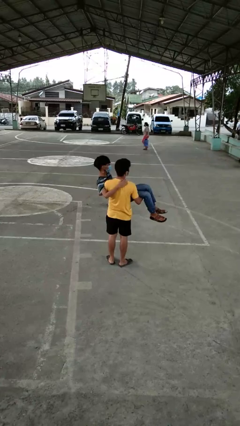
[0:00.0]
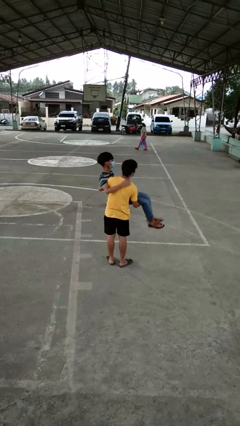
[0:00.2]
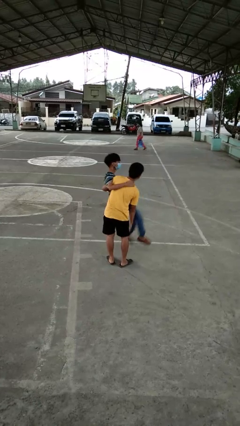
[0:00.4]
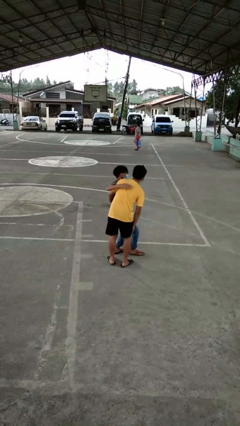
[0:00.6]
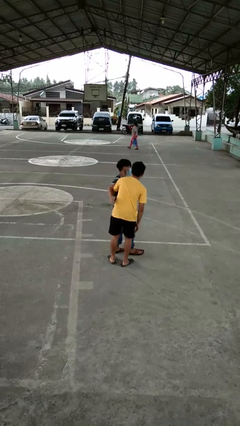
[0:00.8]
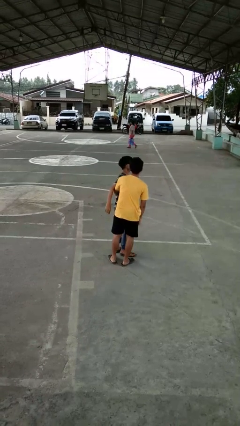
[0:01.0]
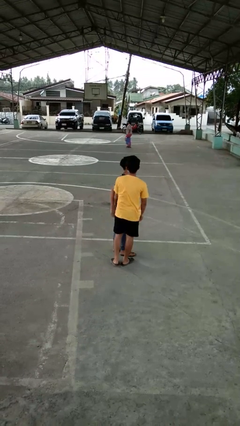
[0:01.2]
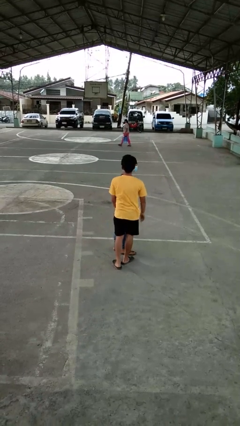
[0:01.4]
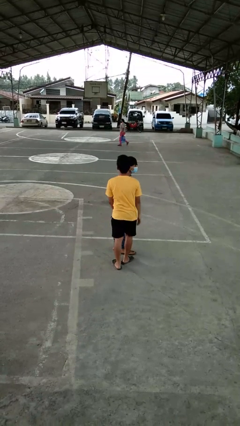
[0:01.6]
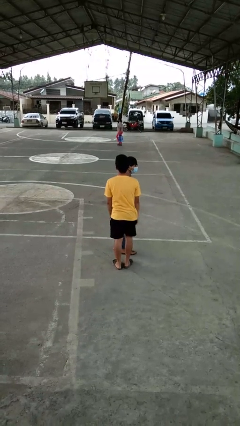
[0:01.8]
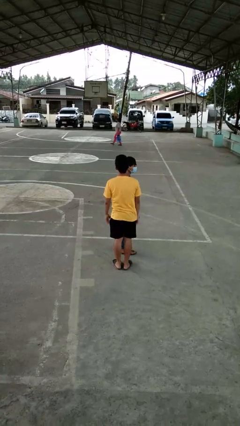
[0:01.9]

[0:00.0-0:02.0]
person puts down person

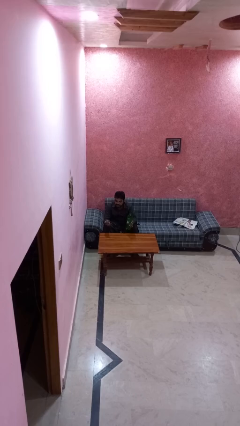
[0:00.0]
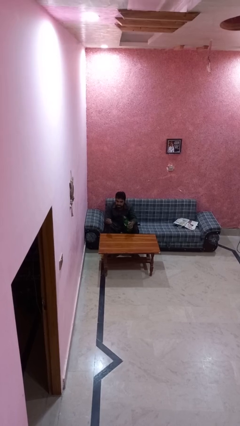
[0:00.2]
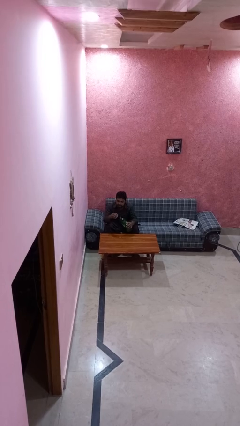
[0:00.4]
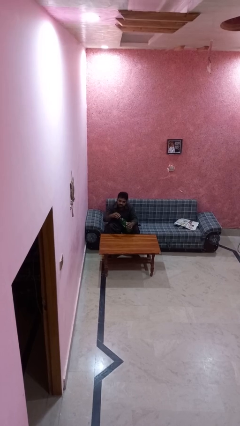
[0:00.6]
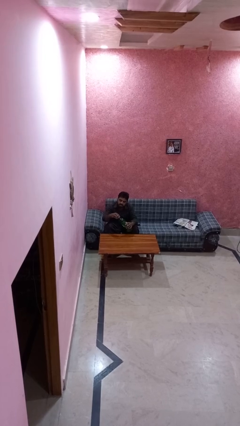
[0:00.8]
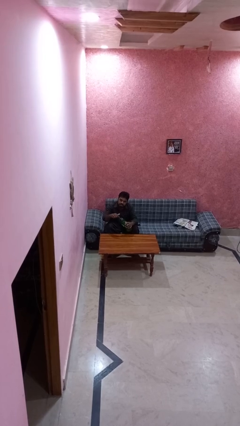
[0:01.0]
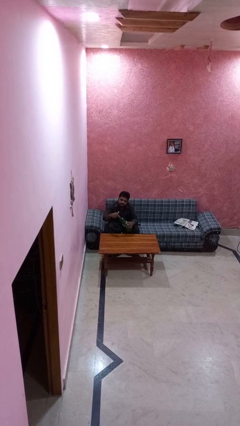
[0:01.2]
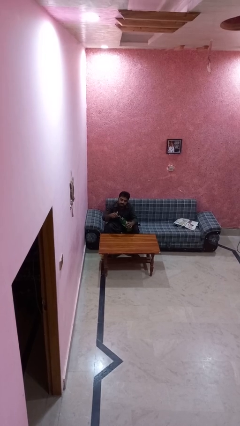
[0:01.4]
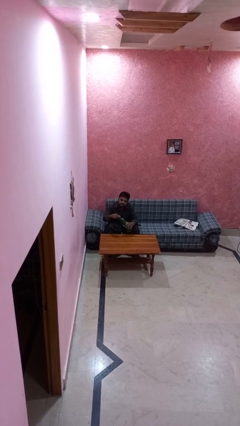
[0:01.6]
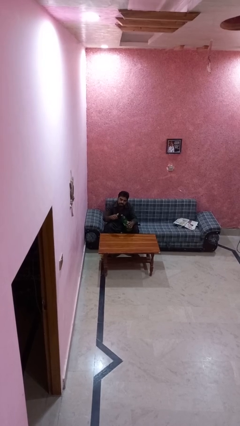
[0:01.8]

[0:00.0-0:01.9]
person screws lid to bottle

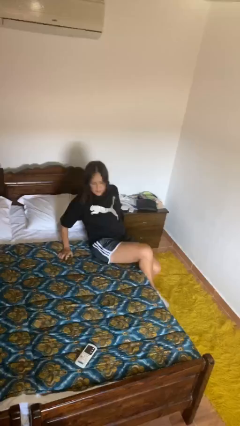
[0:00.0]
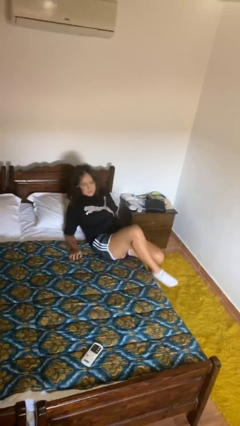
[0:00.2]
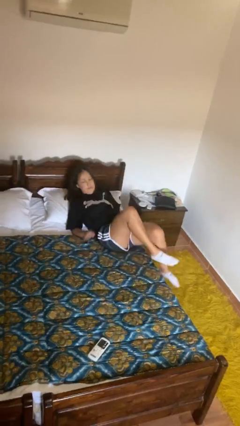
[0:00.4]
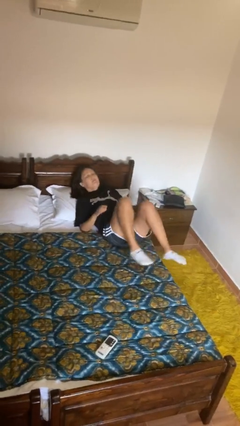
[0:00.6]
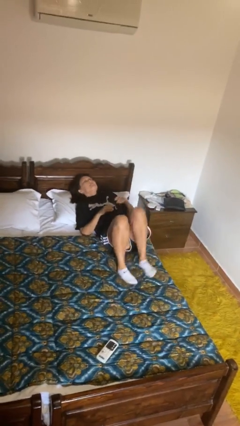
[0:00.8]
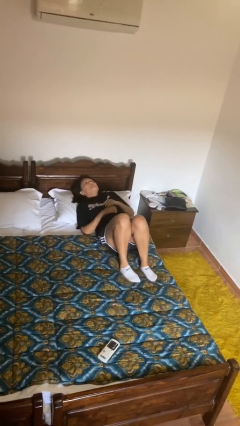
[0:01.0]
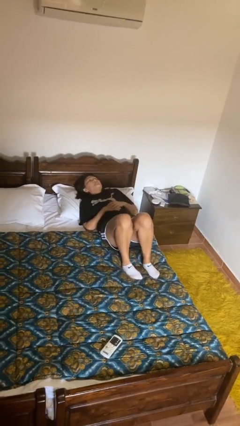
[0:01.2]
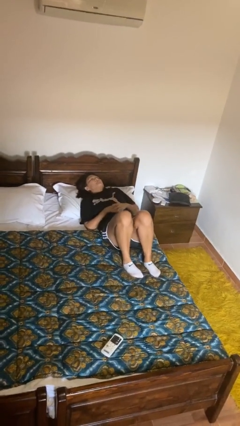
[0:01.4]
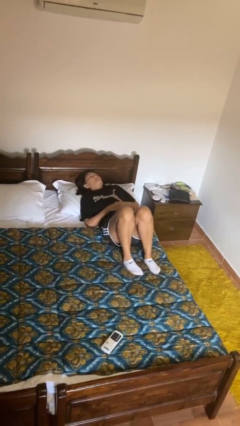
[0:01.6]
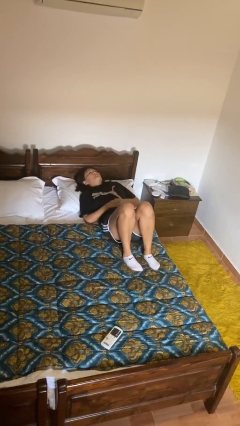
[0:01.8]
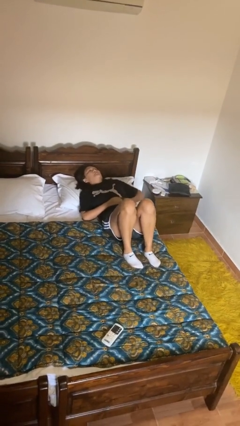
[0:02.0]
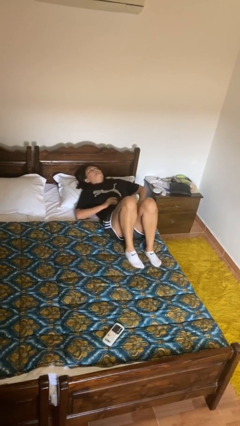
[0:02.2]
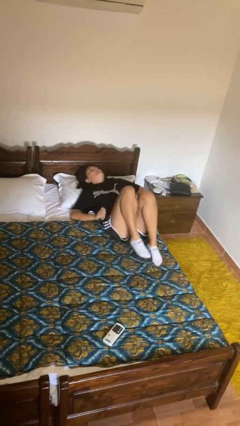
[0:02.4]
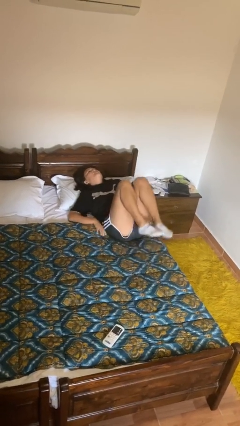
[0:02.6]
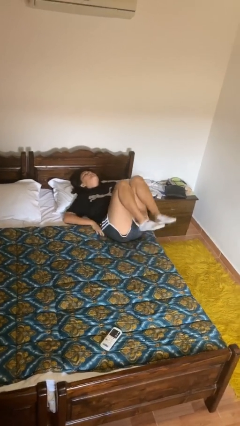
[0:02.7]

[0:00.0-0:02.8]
person lies down on bed

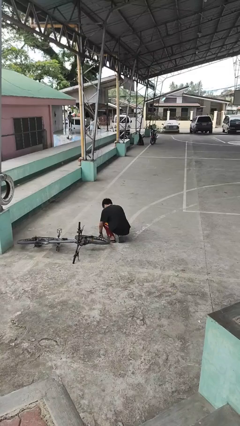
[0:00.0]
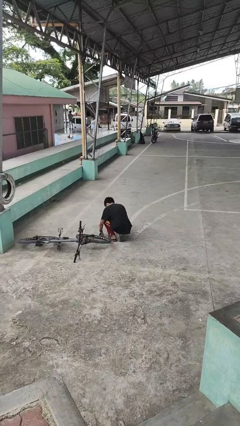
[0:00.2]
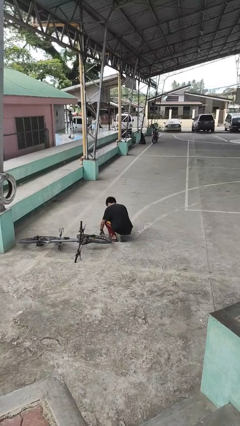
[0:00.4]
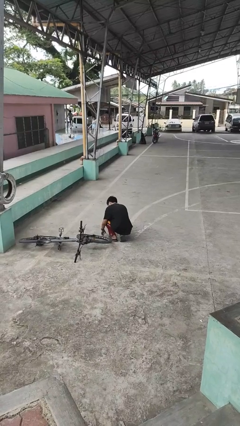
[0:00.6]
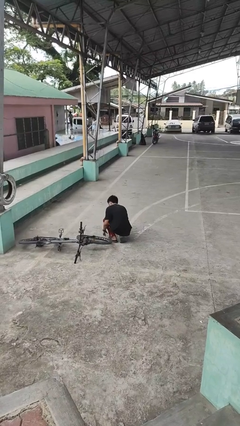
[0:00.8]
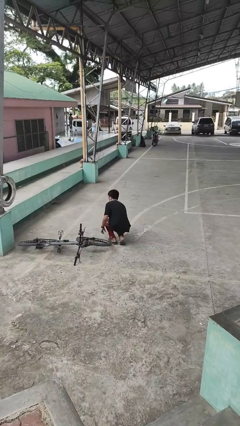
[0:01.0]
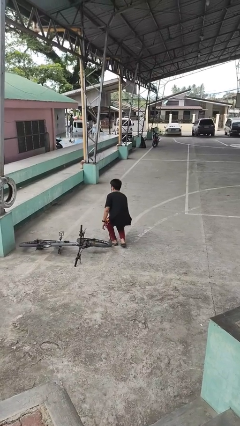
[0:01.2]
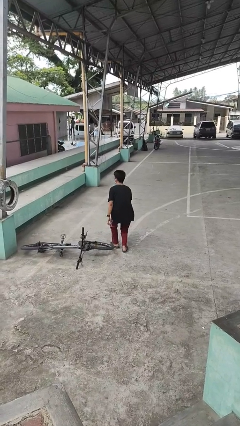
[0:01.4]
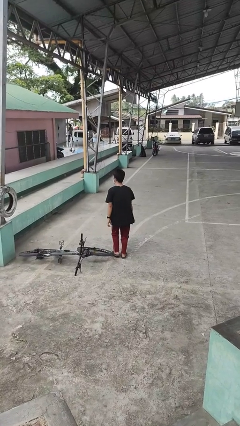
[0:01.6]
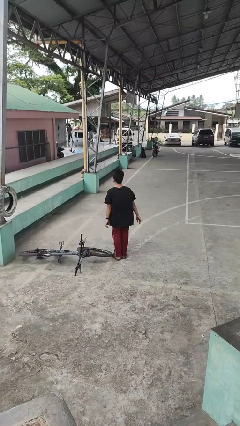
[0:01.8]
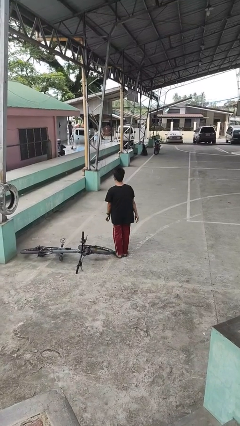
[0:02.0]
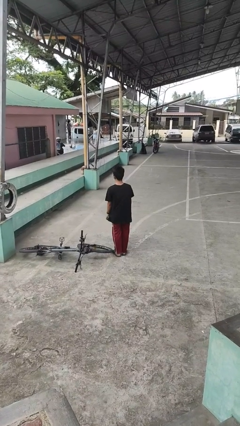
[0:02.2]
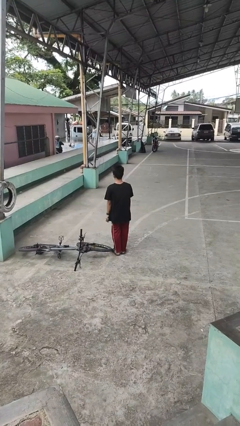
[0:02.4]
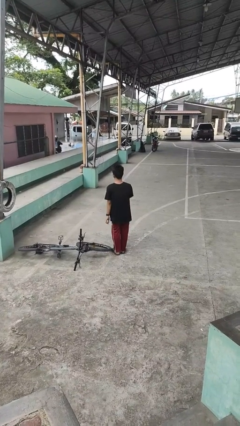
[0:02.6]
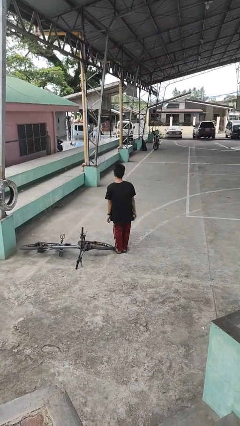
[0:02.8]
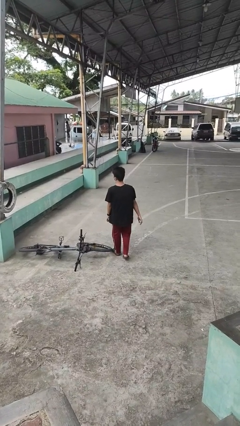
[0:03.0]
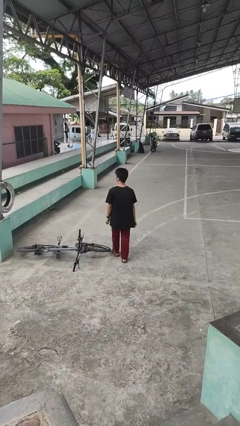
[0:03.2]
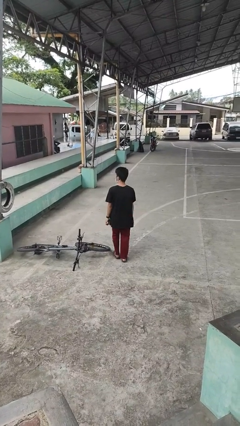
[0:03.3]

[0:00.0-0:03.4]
person stands up from floor

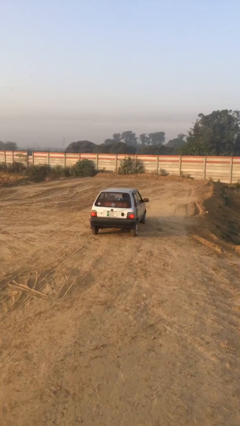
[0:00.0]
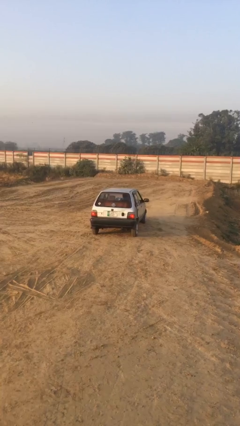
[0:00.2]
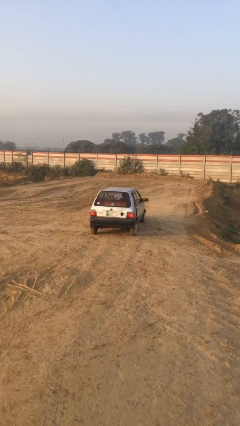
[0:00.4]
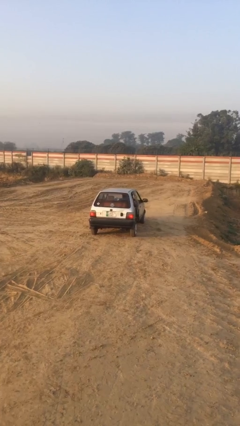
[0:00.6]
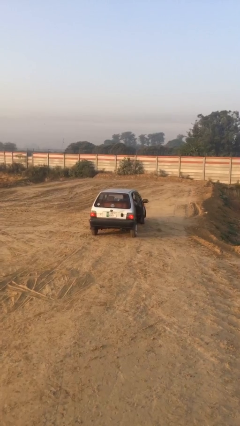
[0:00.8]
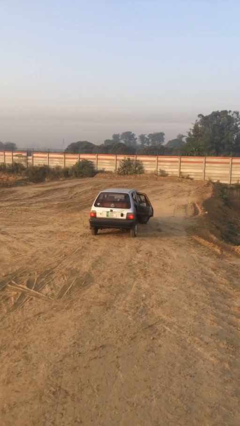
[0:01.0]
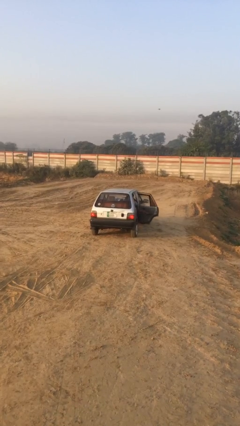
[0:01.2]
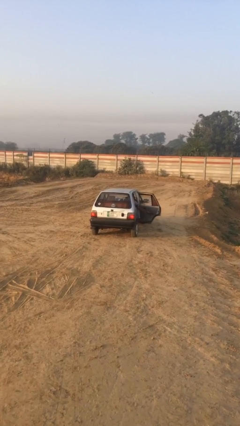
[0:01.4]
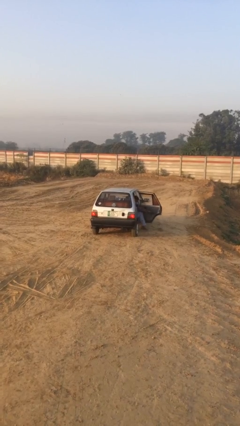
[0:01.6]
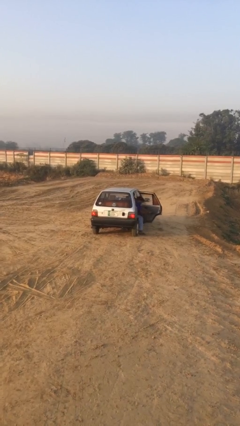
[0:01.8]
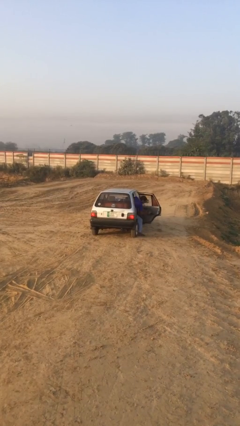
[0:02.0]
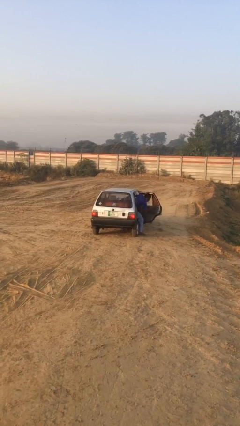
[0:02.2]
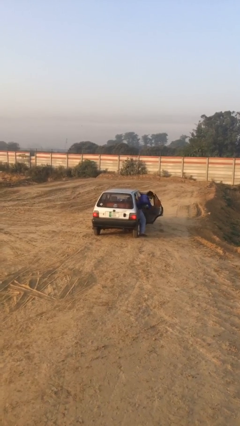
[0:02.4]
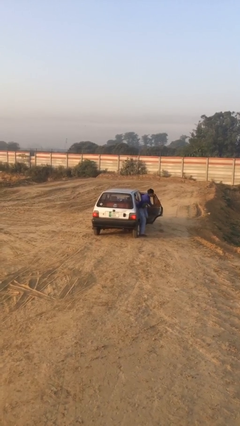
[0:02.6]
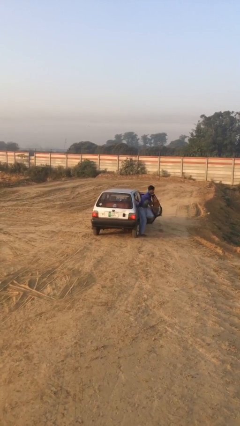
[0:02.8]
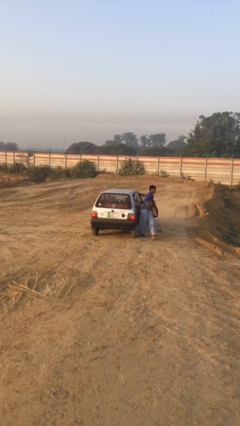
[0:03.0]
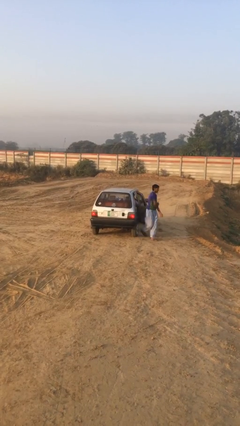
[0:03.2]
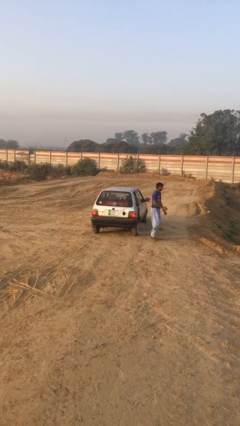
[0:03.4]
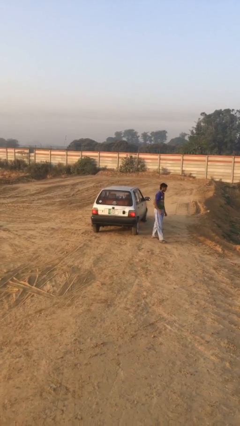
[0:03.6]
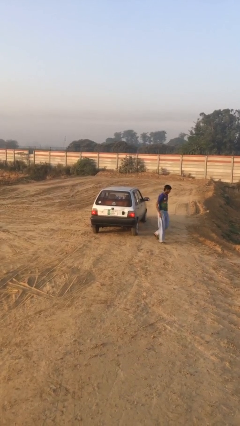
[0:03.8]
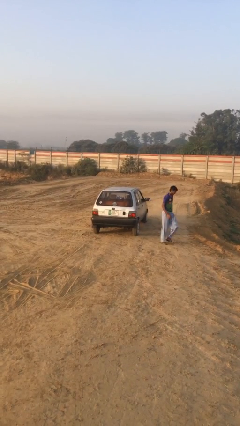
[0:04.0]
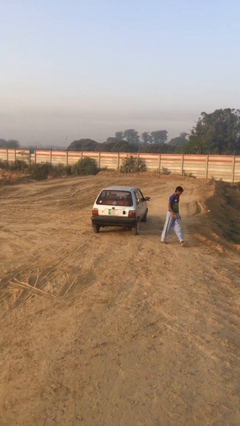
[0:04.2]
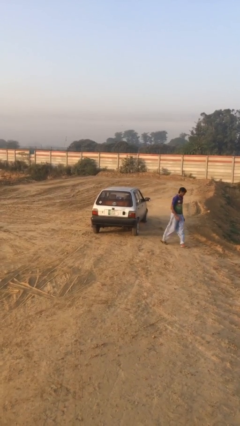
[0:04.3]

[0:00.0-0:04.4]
car drops off person

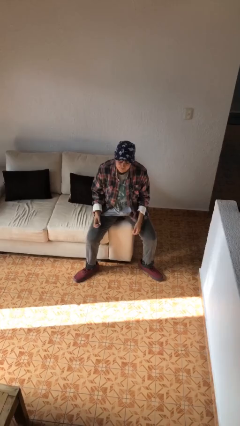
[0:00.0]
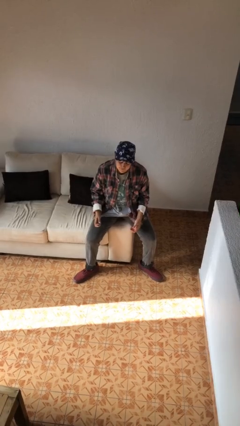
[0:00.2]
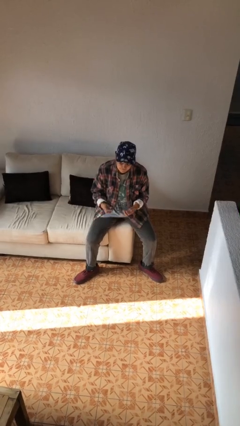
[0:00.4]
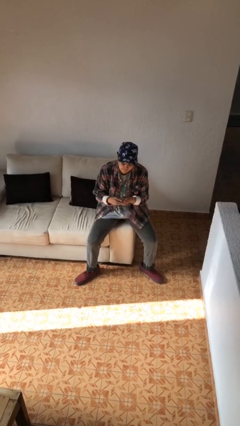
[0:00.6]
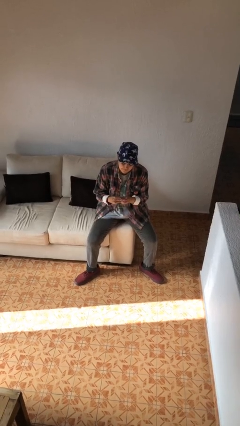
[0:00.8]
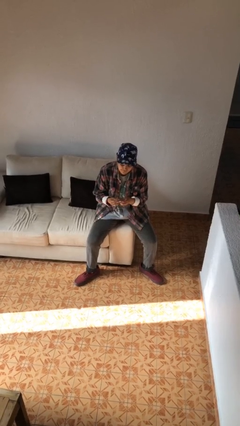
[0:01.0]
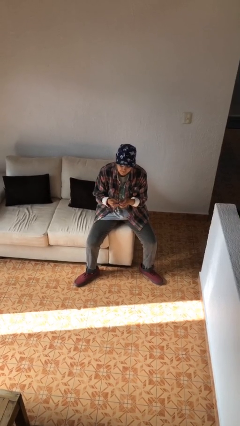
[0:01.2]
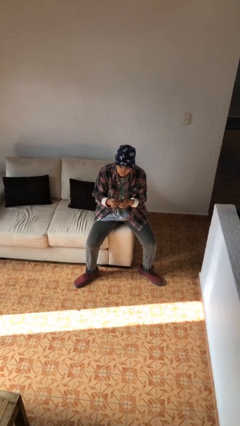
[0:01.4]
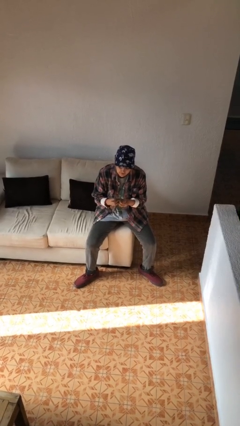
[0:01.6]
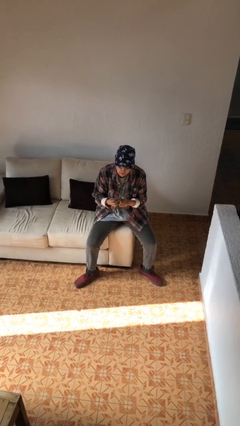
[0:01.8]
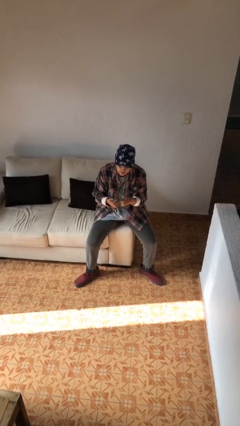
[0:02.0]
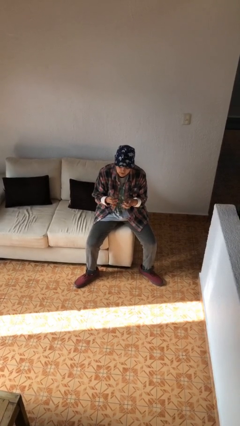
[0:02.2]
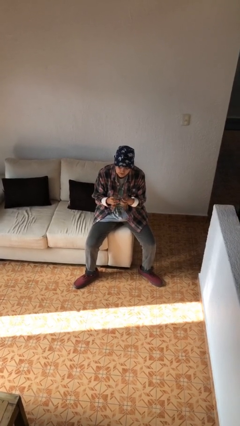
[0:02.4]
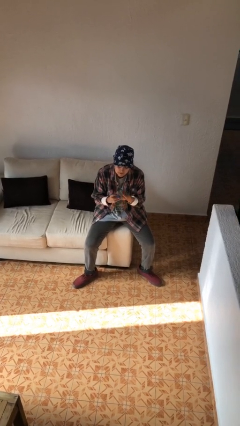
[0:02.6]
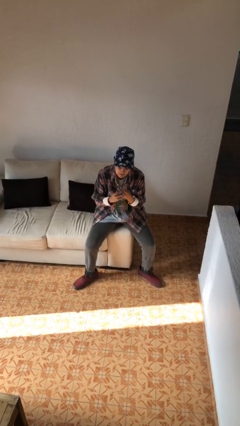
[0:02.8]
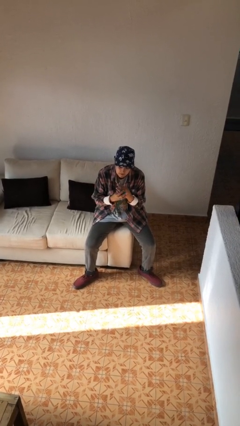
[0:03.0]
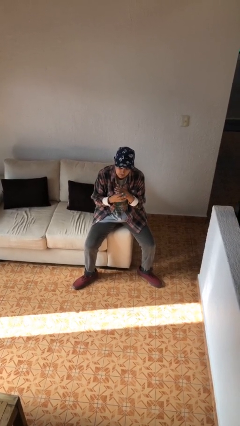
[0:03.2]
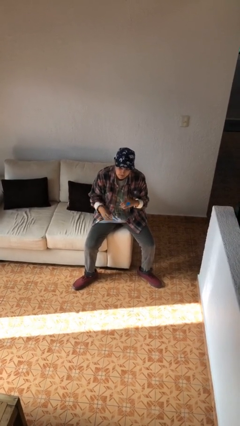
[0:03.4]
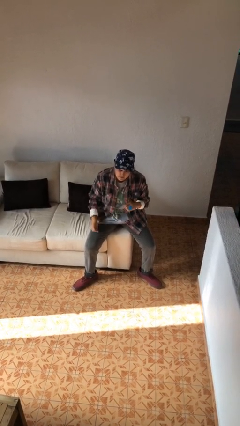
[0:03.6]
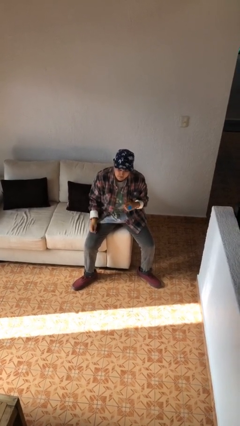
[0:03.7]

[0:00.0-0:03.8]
person puts on ring
